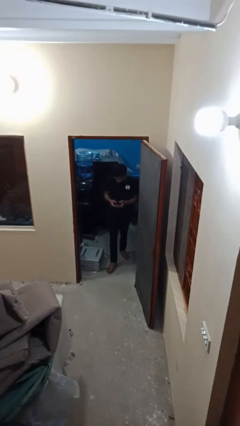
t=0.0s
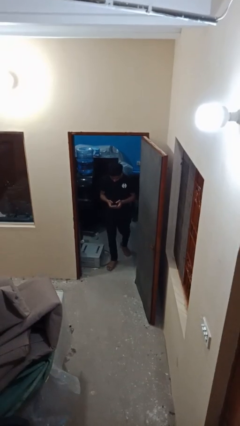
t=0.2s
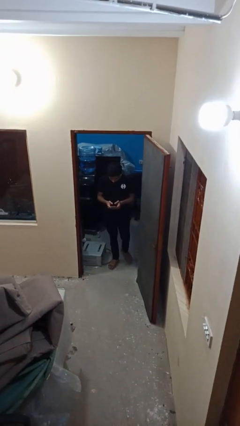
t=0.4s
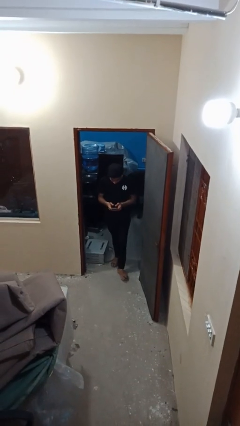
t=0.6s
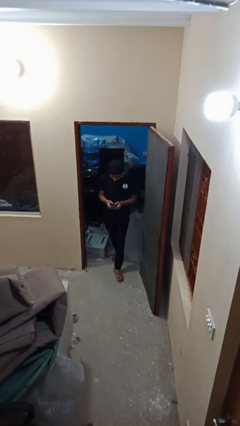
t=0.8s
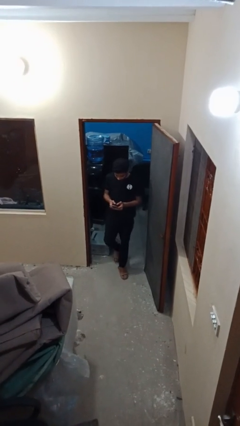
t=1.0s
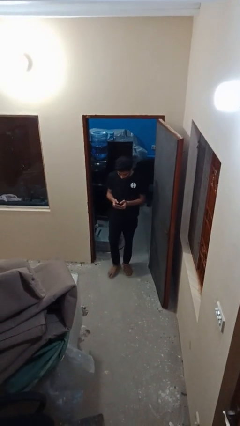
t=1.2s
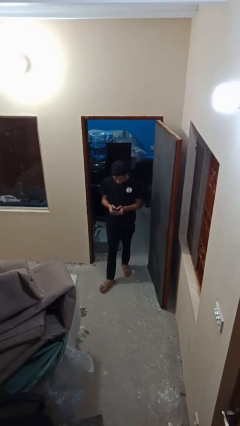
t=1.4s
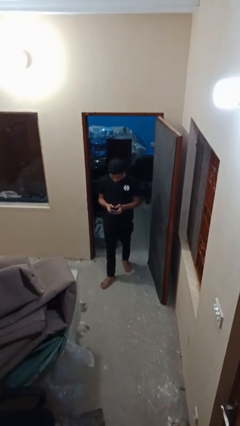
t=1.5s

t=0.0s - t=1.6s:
person enters scene through structure

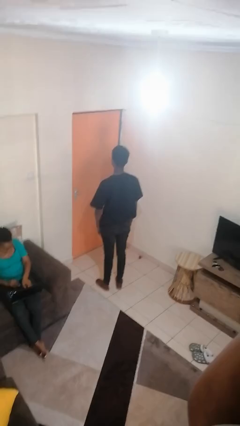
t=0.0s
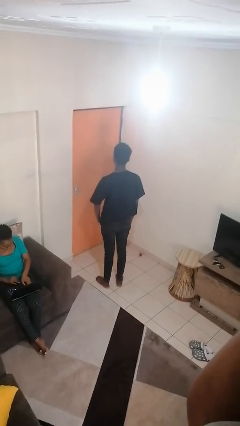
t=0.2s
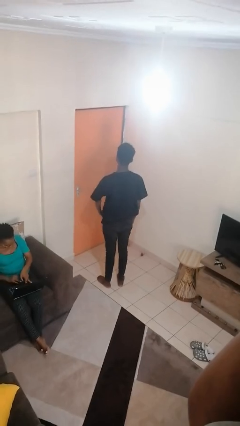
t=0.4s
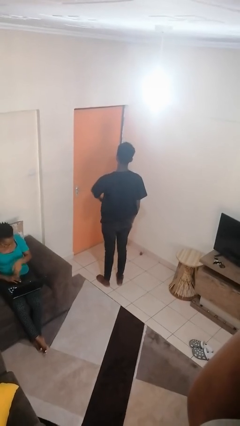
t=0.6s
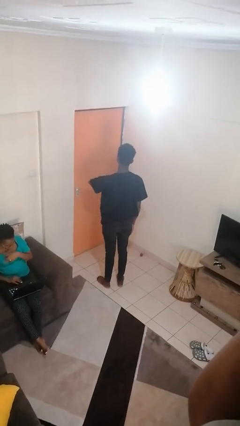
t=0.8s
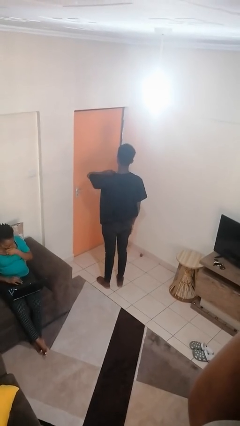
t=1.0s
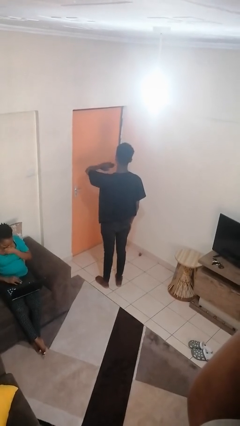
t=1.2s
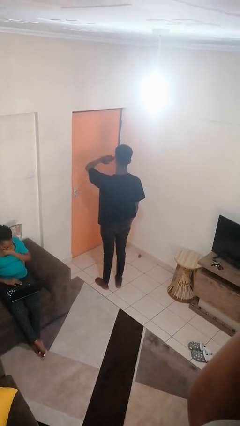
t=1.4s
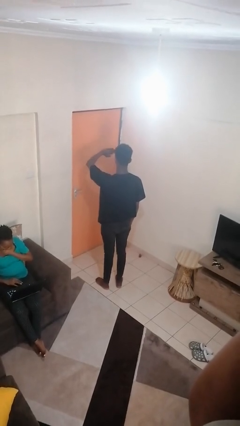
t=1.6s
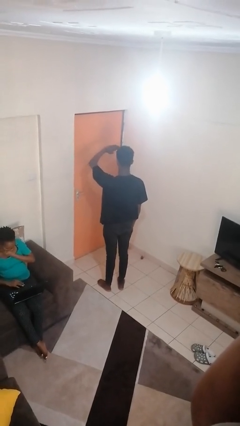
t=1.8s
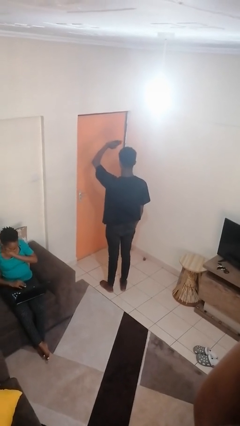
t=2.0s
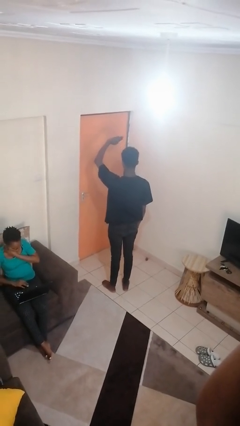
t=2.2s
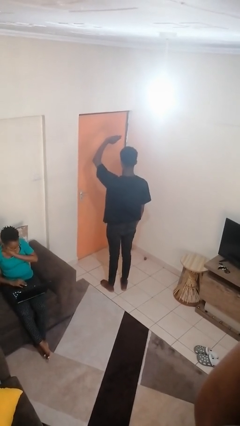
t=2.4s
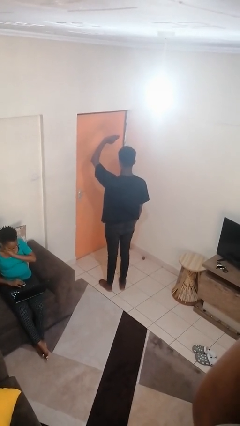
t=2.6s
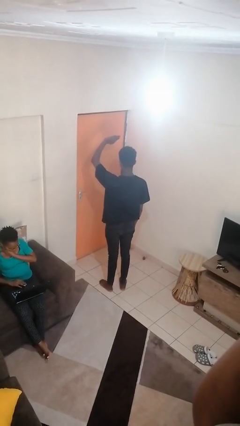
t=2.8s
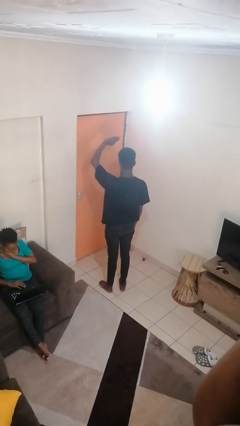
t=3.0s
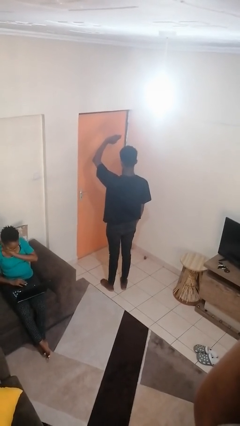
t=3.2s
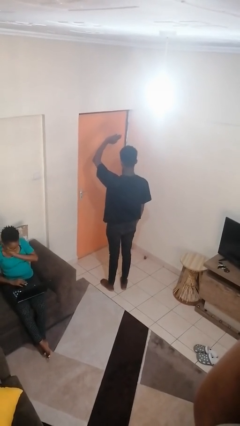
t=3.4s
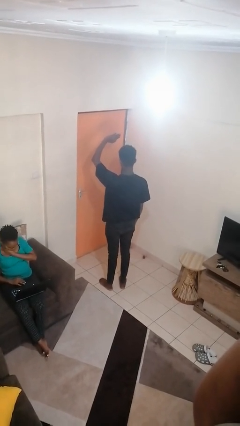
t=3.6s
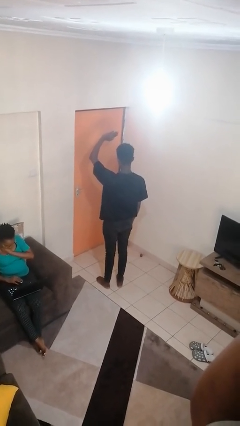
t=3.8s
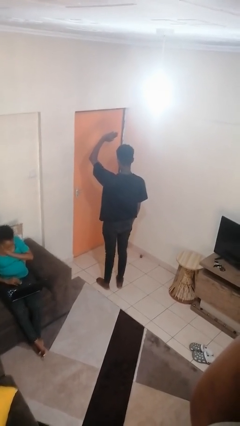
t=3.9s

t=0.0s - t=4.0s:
person gestures swipe up

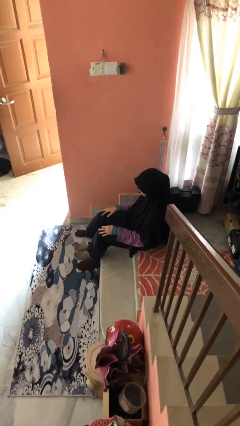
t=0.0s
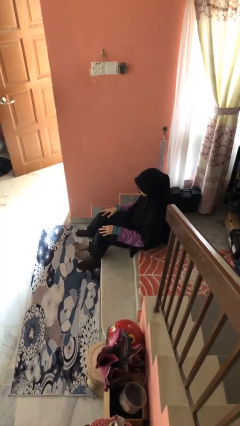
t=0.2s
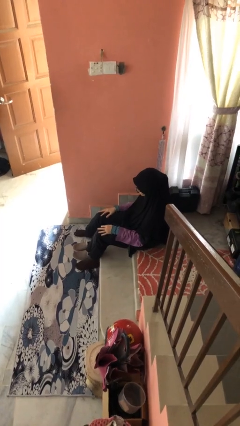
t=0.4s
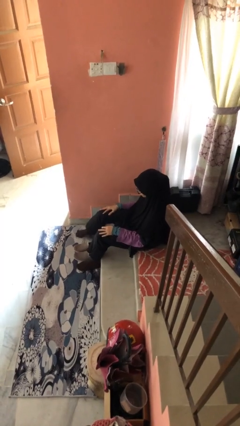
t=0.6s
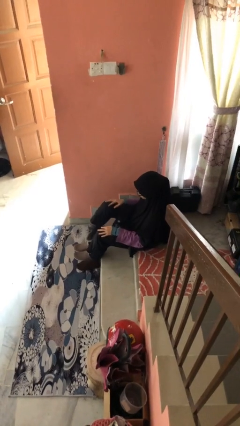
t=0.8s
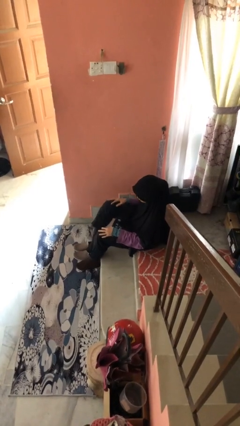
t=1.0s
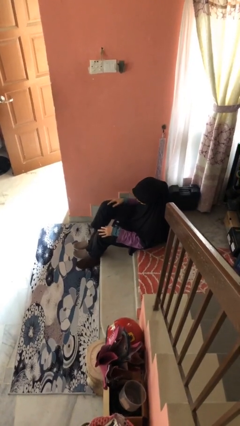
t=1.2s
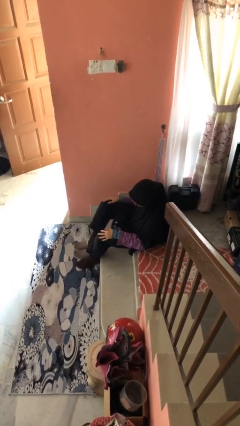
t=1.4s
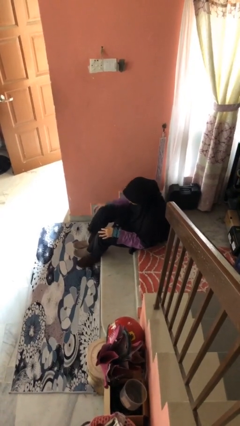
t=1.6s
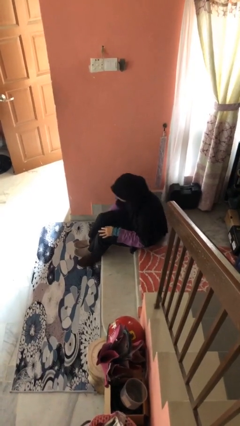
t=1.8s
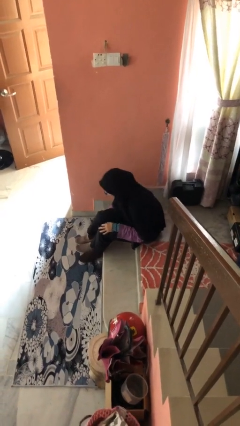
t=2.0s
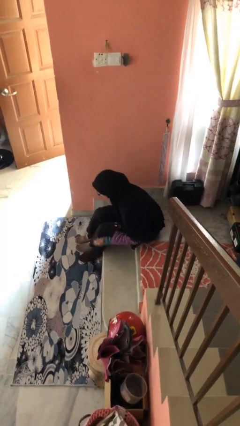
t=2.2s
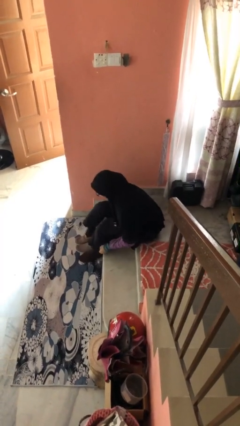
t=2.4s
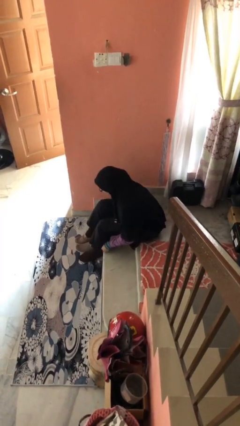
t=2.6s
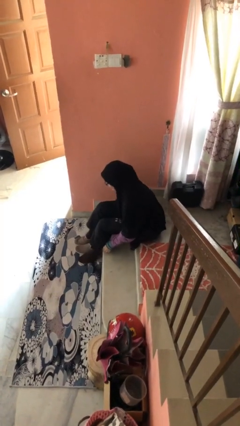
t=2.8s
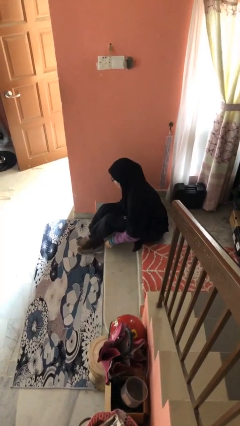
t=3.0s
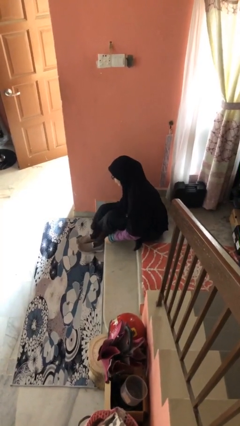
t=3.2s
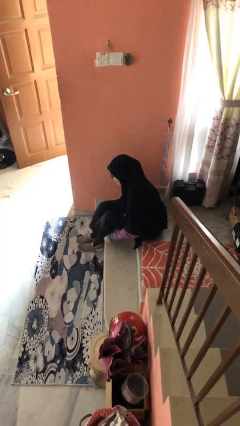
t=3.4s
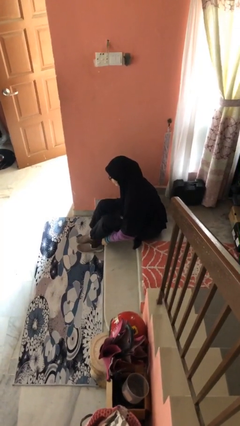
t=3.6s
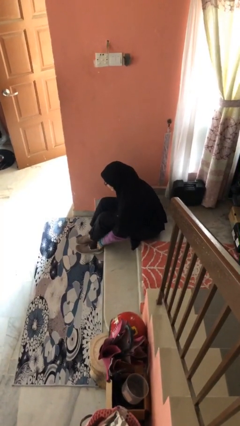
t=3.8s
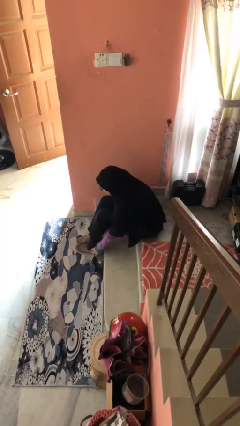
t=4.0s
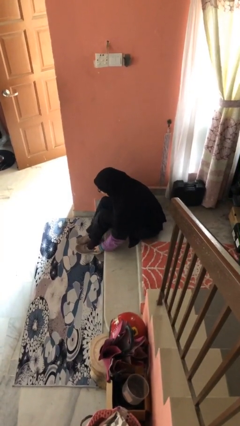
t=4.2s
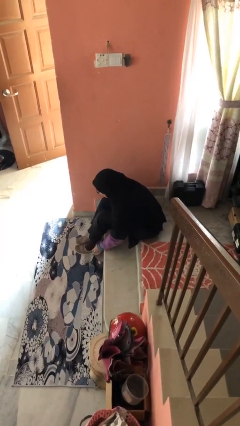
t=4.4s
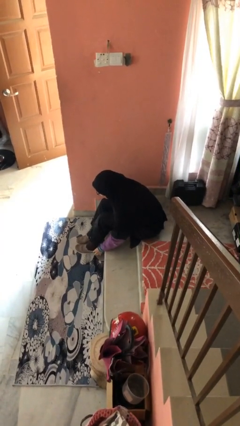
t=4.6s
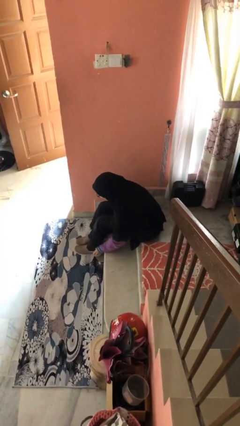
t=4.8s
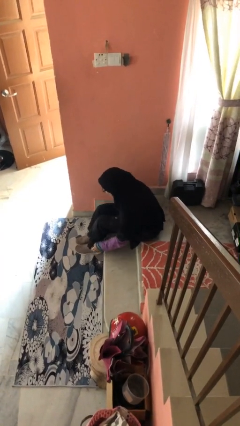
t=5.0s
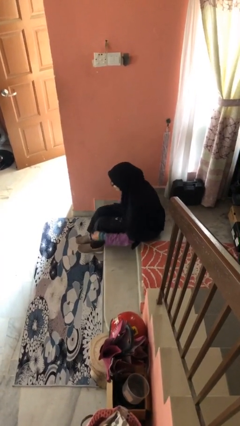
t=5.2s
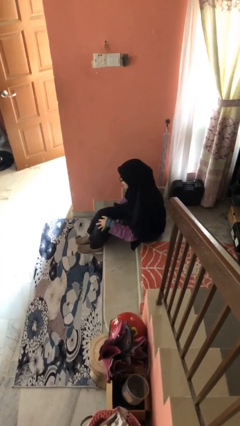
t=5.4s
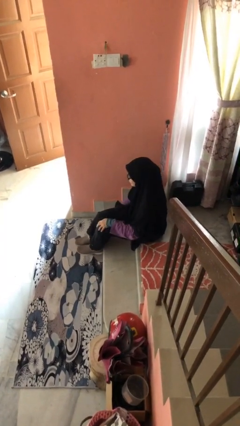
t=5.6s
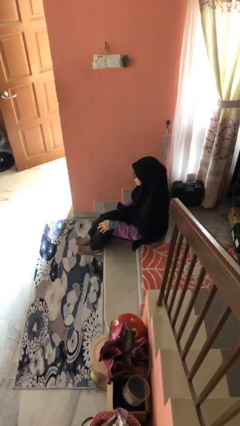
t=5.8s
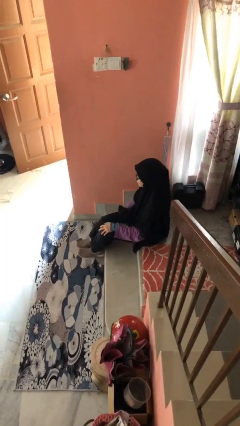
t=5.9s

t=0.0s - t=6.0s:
person puts on shoes

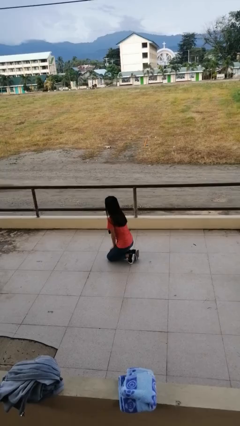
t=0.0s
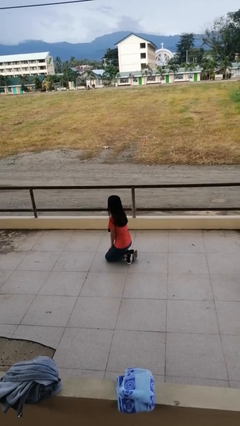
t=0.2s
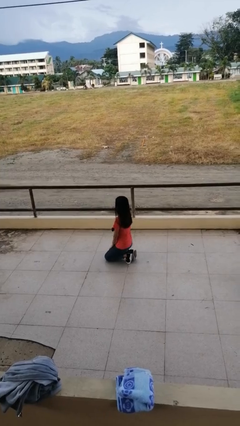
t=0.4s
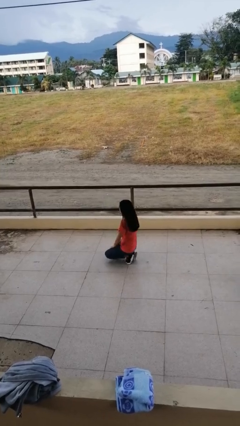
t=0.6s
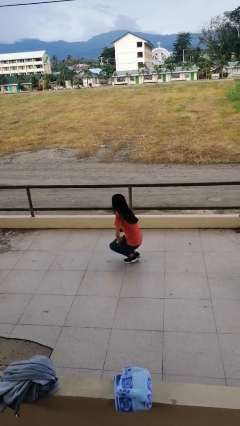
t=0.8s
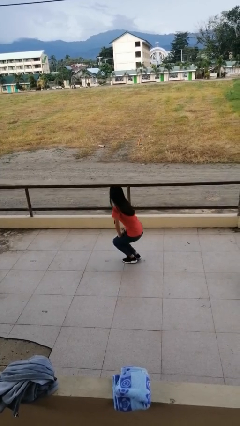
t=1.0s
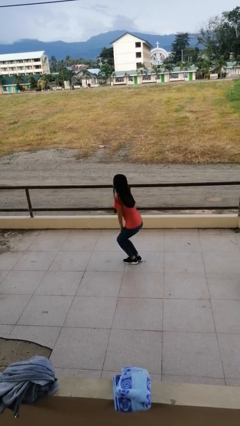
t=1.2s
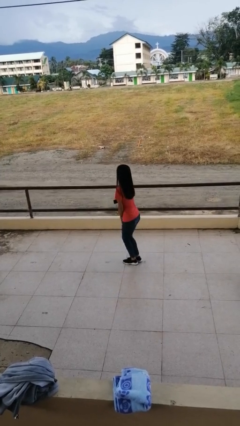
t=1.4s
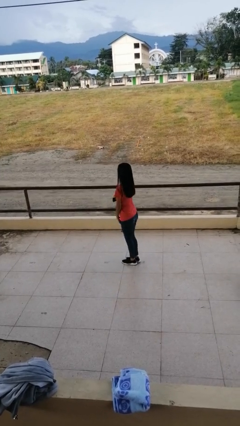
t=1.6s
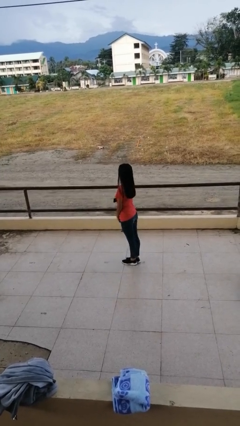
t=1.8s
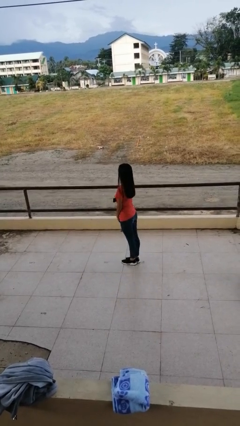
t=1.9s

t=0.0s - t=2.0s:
person stands up from floor

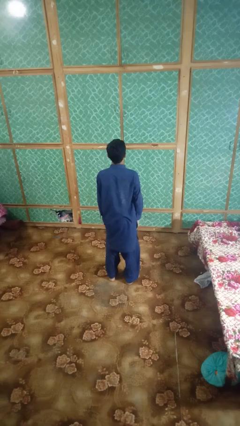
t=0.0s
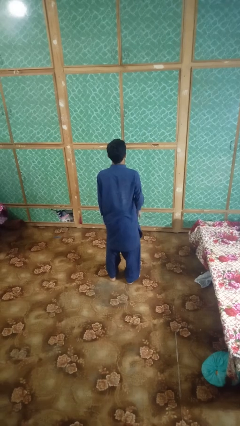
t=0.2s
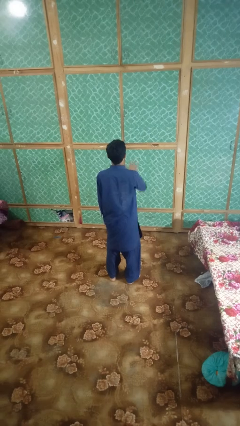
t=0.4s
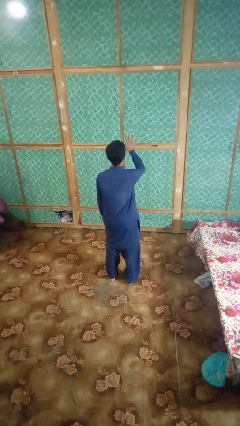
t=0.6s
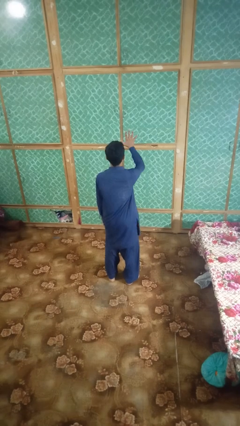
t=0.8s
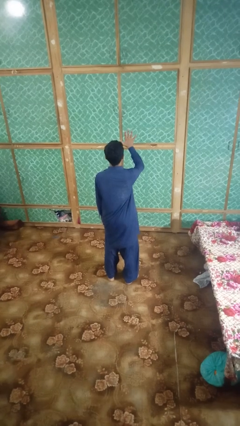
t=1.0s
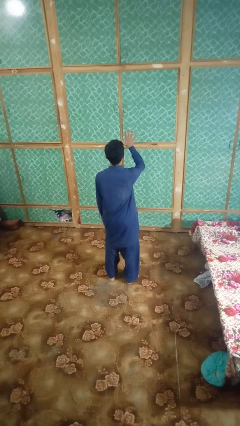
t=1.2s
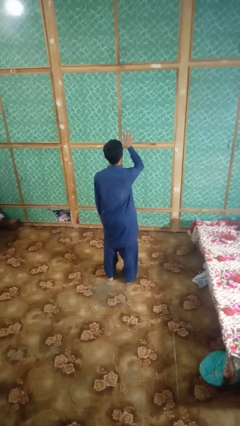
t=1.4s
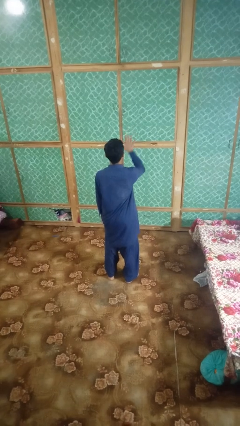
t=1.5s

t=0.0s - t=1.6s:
person gestures number five

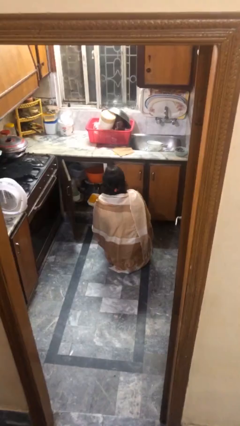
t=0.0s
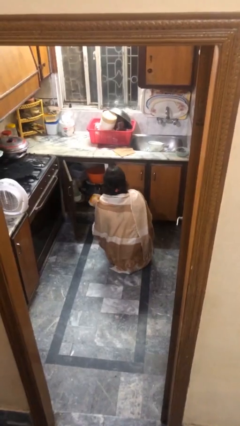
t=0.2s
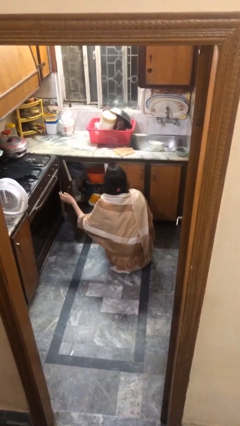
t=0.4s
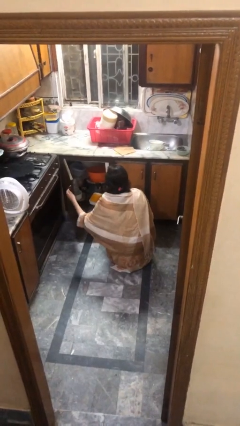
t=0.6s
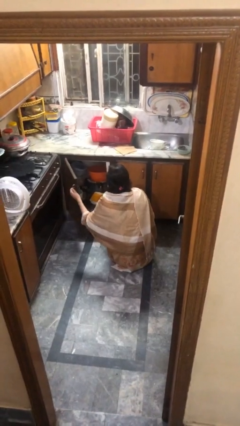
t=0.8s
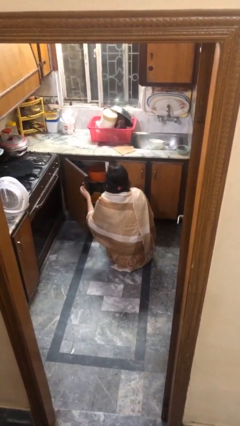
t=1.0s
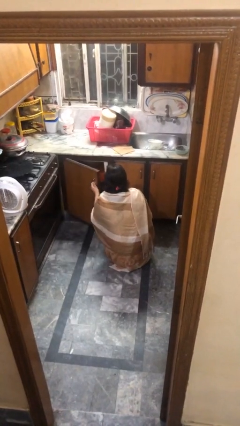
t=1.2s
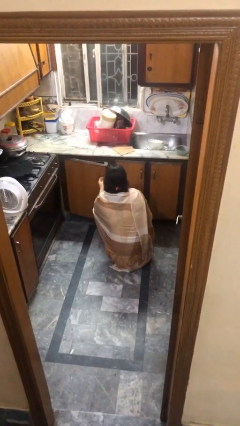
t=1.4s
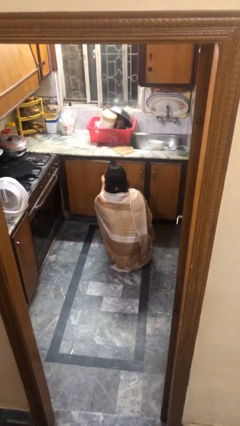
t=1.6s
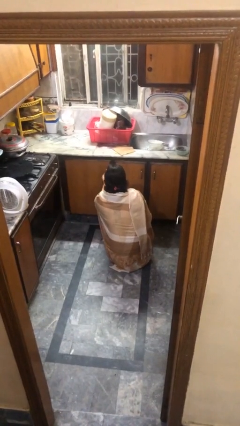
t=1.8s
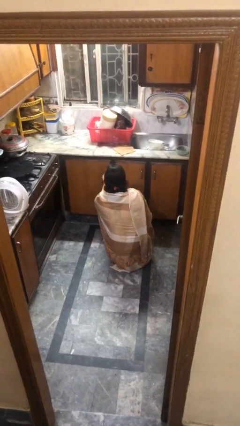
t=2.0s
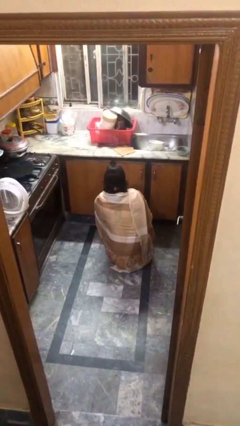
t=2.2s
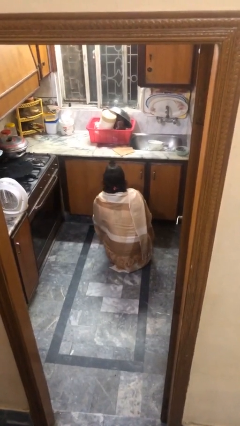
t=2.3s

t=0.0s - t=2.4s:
person closes kitchen drawer
